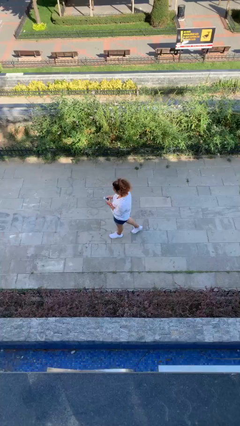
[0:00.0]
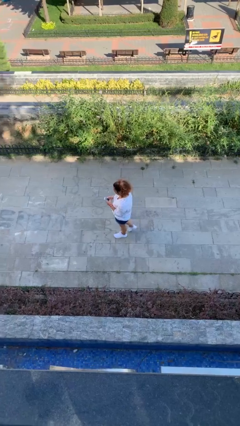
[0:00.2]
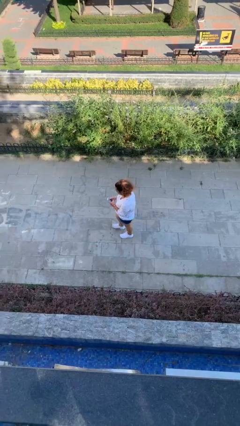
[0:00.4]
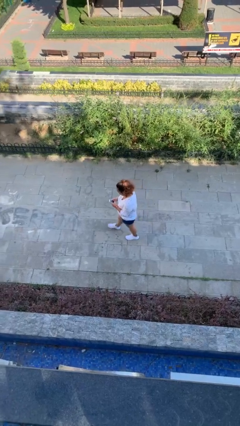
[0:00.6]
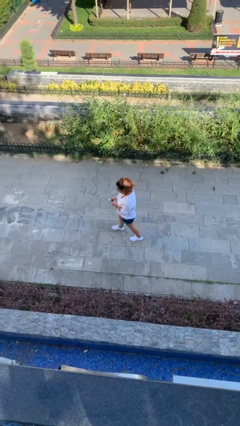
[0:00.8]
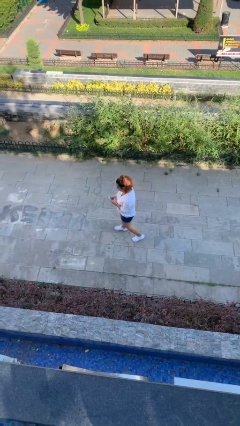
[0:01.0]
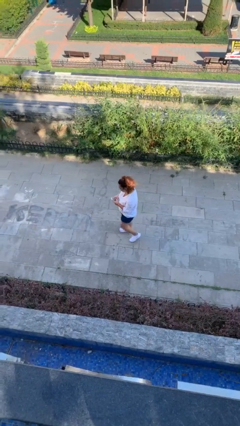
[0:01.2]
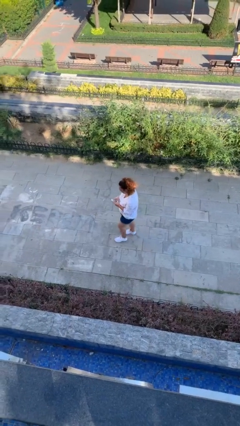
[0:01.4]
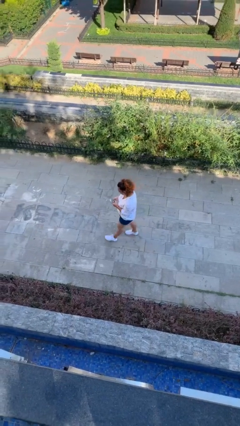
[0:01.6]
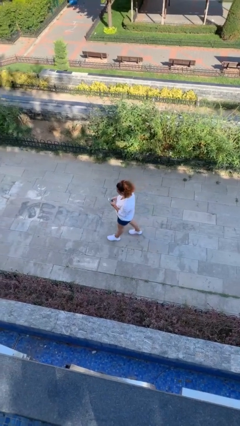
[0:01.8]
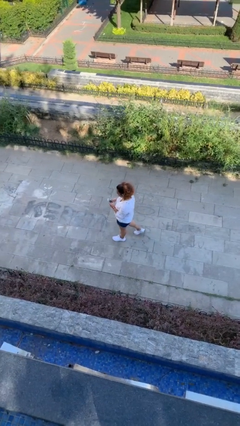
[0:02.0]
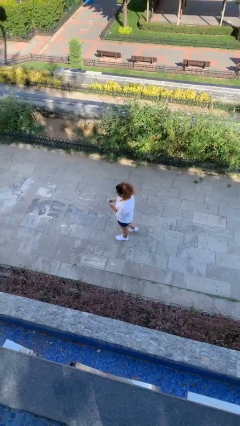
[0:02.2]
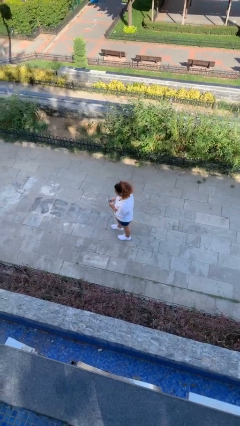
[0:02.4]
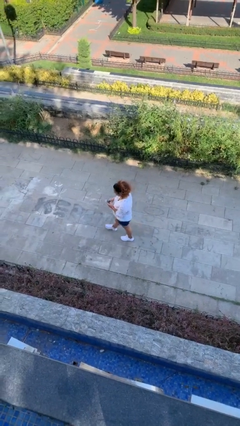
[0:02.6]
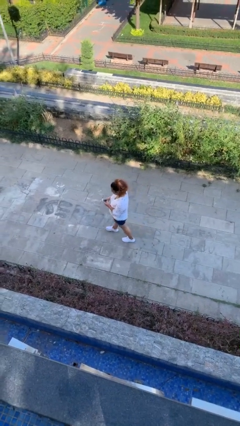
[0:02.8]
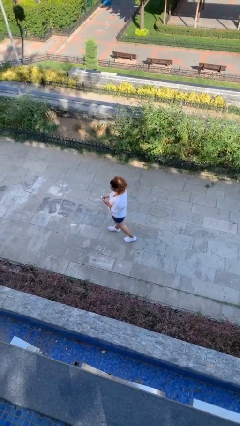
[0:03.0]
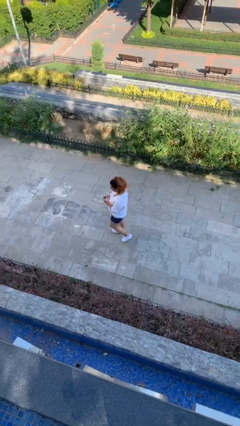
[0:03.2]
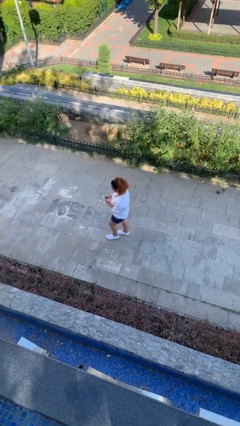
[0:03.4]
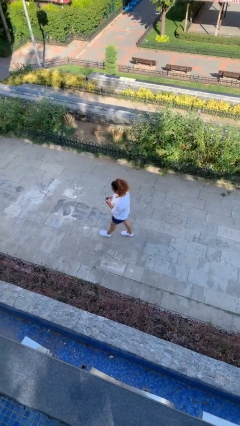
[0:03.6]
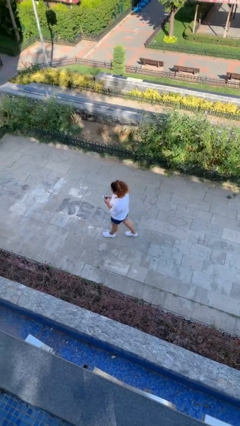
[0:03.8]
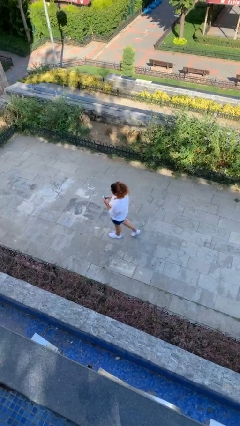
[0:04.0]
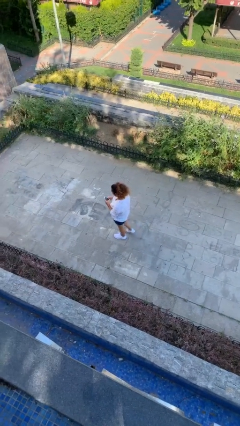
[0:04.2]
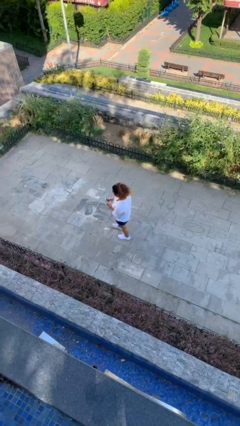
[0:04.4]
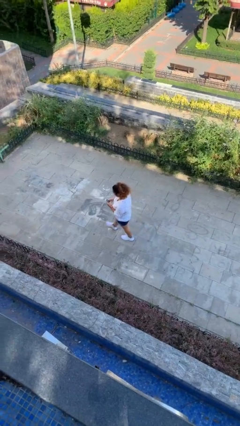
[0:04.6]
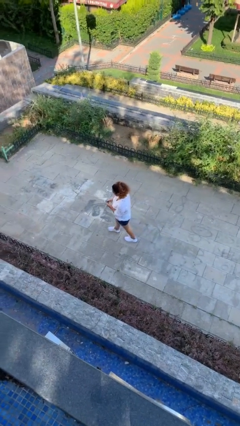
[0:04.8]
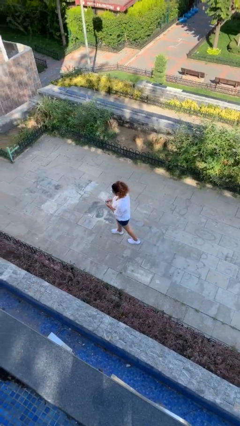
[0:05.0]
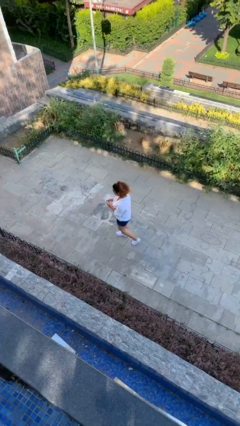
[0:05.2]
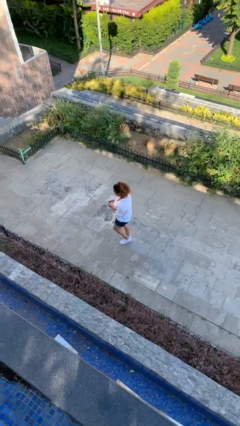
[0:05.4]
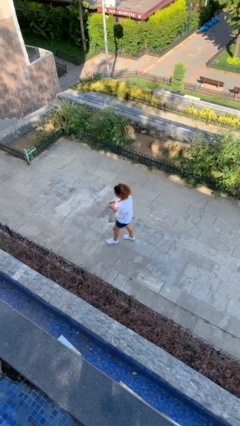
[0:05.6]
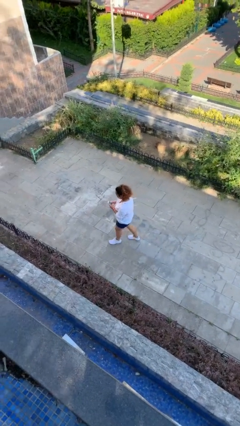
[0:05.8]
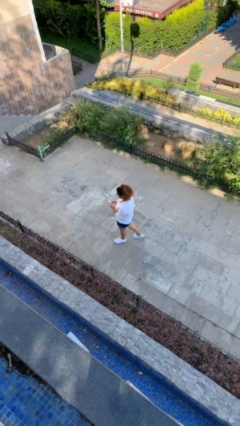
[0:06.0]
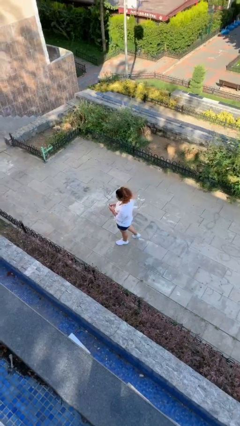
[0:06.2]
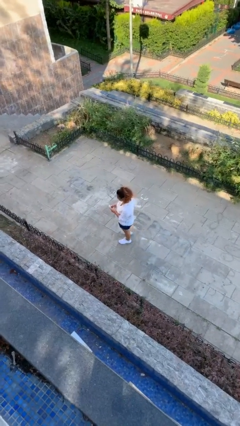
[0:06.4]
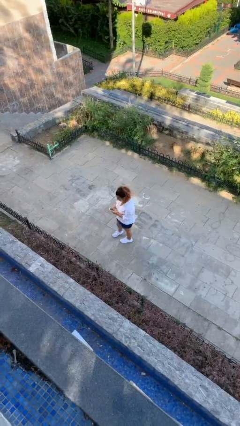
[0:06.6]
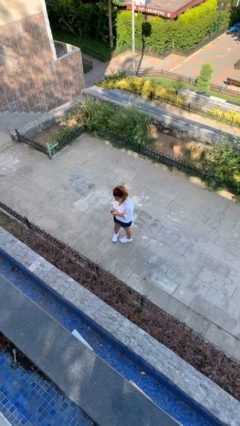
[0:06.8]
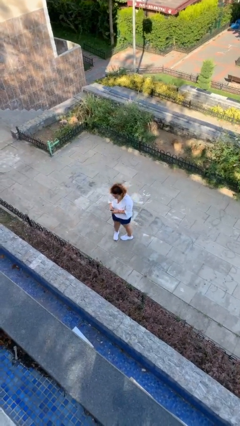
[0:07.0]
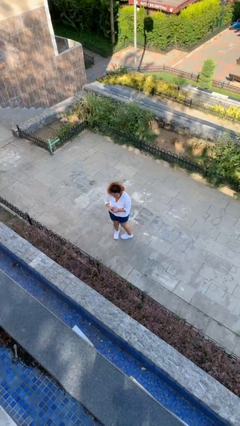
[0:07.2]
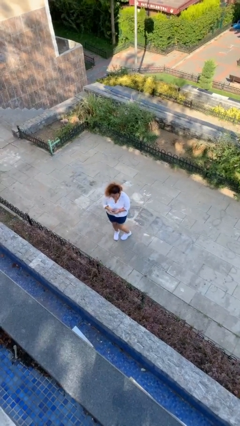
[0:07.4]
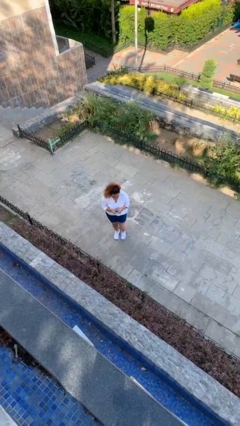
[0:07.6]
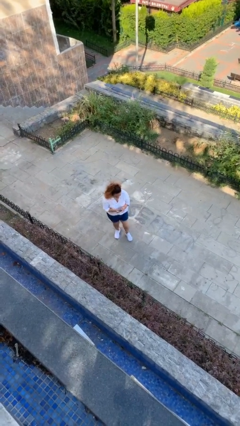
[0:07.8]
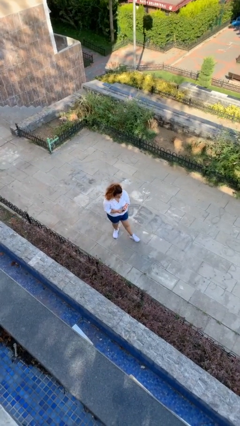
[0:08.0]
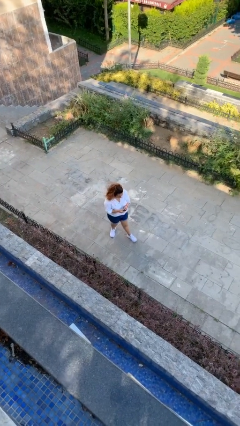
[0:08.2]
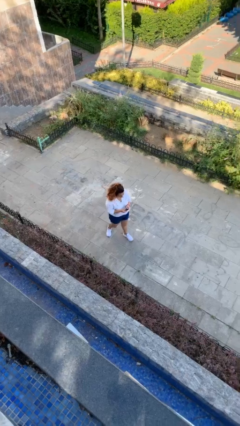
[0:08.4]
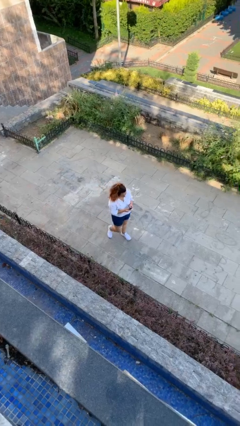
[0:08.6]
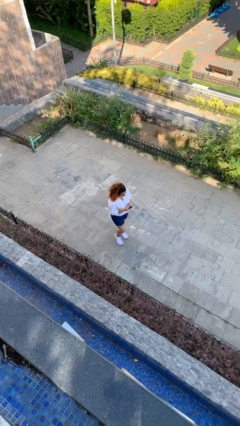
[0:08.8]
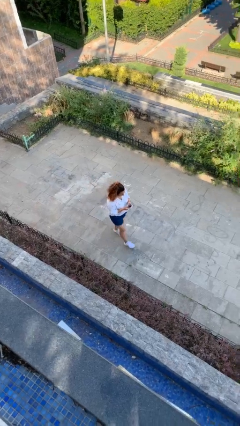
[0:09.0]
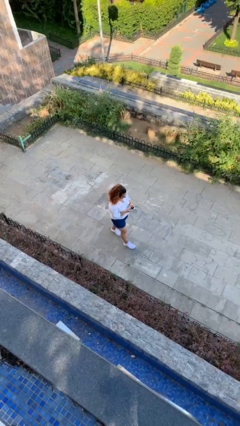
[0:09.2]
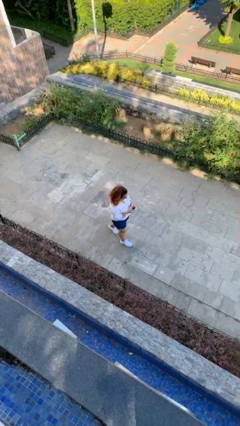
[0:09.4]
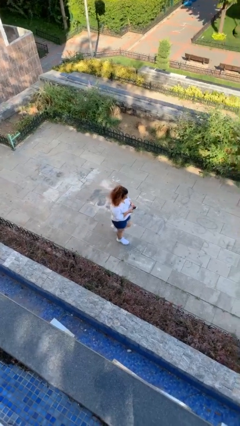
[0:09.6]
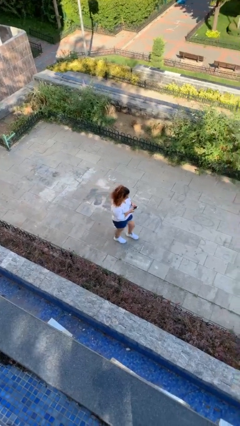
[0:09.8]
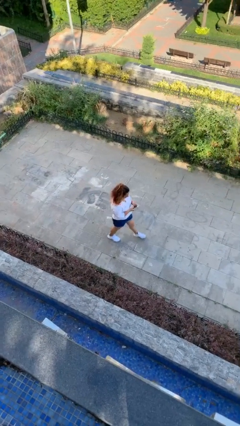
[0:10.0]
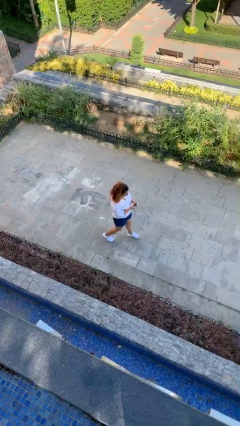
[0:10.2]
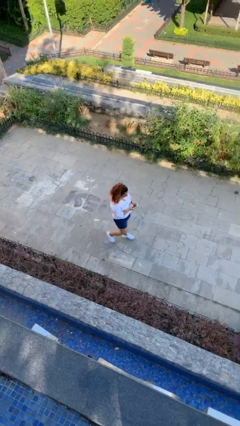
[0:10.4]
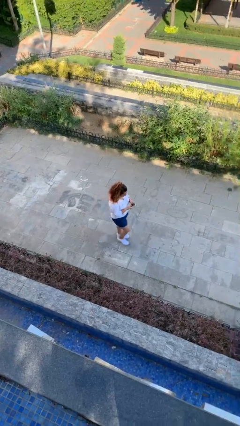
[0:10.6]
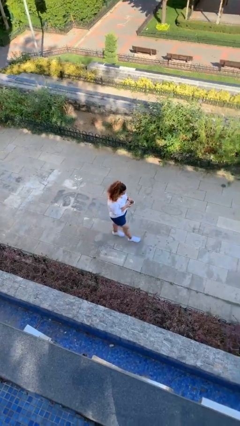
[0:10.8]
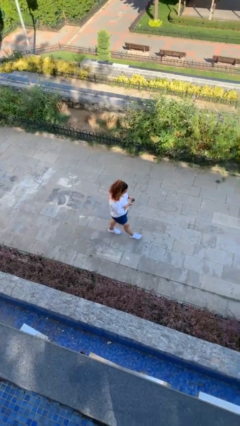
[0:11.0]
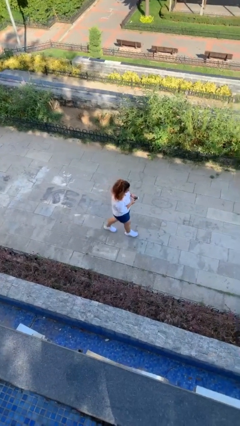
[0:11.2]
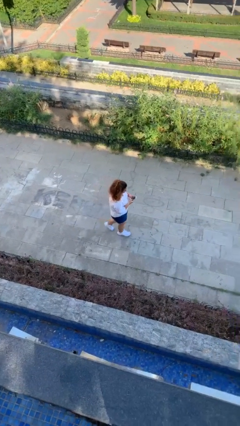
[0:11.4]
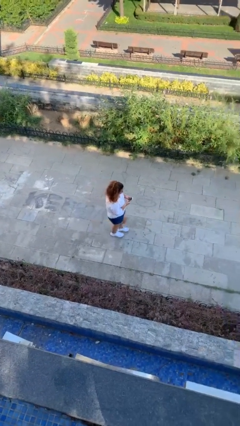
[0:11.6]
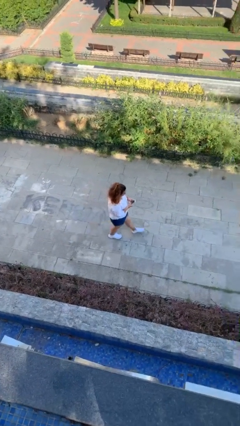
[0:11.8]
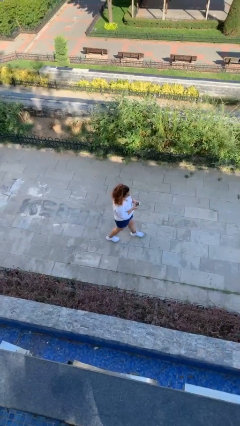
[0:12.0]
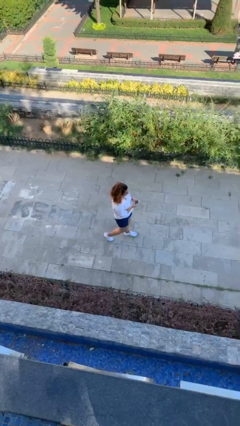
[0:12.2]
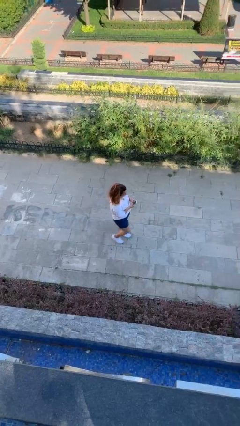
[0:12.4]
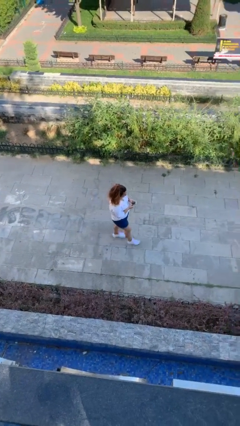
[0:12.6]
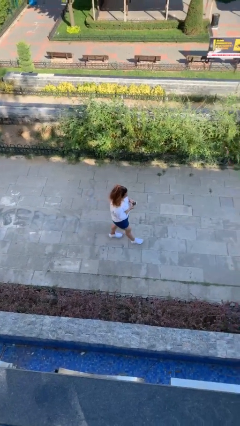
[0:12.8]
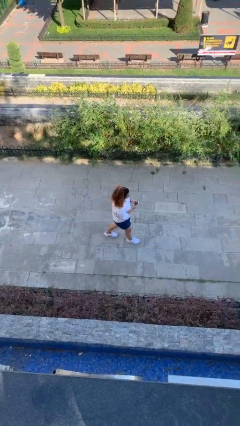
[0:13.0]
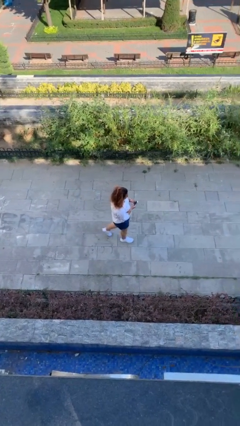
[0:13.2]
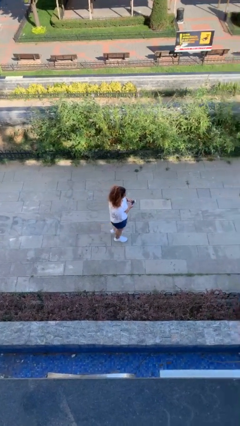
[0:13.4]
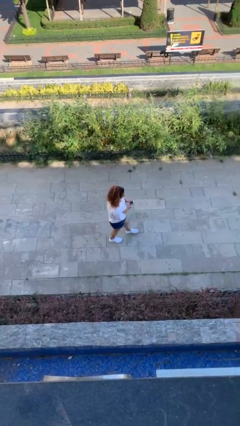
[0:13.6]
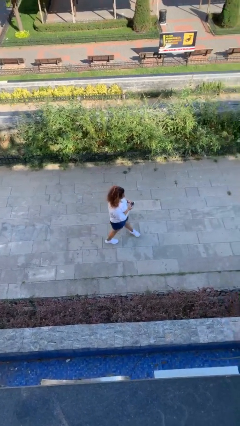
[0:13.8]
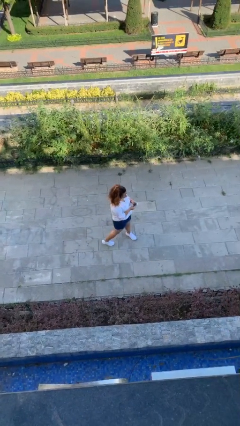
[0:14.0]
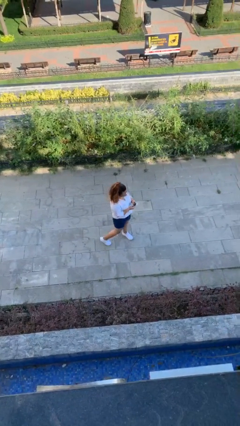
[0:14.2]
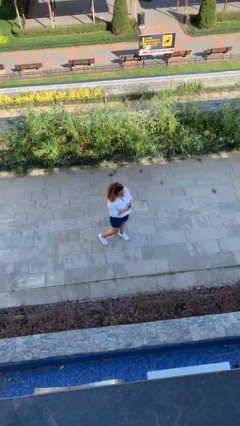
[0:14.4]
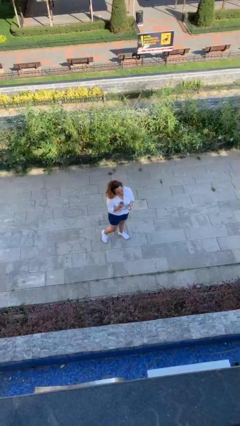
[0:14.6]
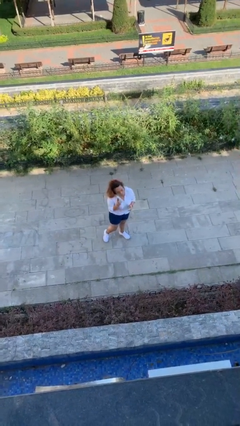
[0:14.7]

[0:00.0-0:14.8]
person texts on phone

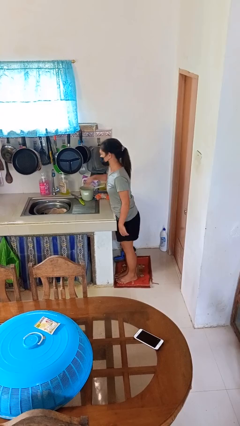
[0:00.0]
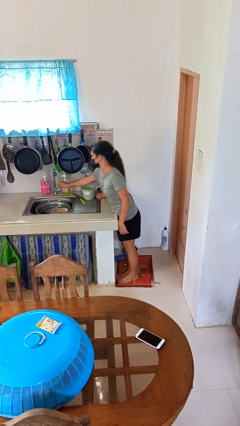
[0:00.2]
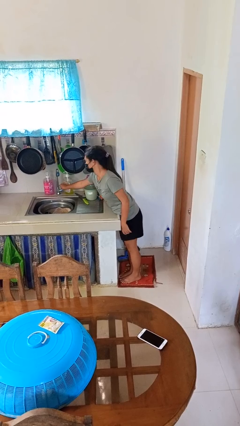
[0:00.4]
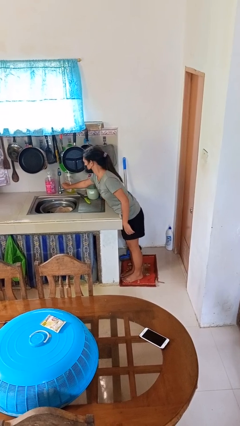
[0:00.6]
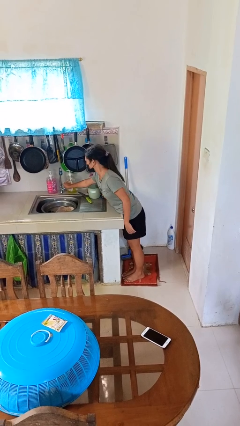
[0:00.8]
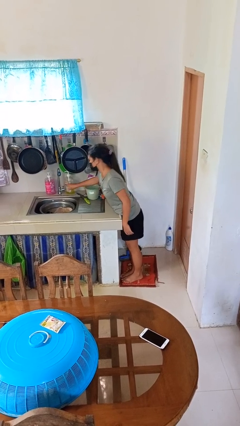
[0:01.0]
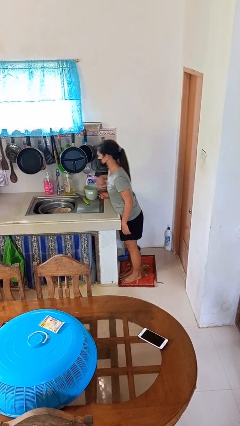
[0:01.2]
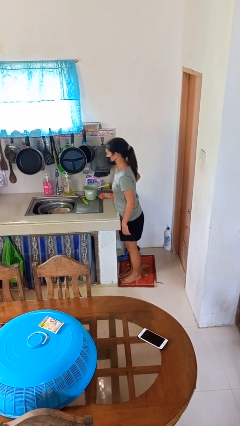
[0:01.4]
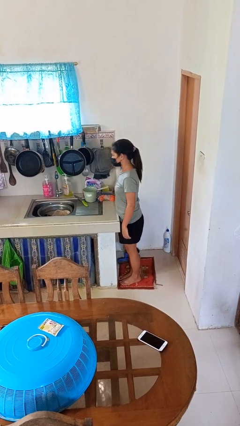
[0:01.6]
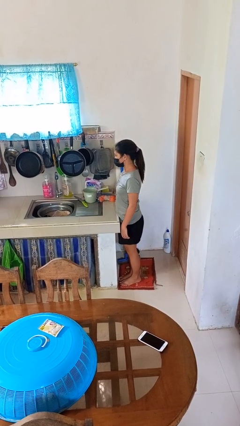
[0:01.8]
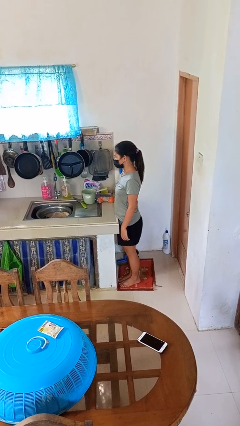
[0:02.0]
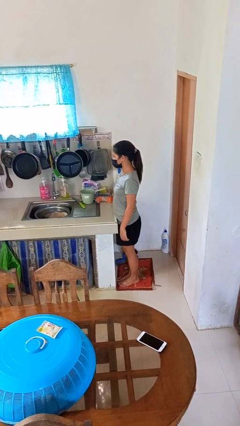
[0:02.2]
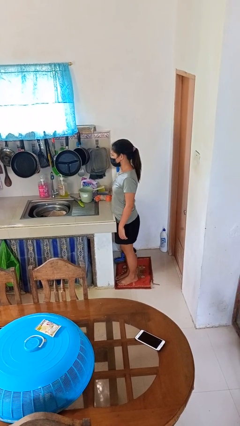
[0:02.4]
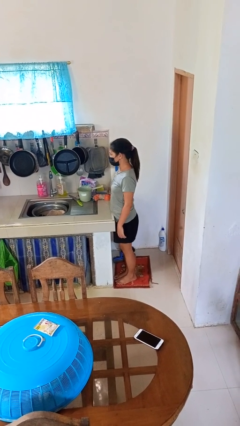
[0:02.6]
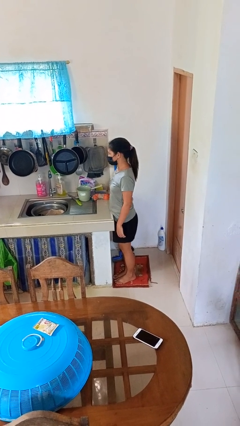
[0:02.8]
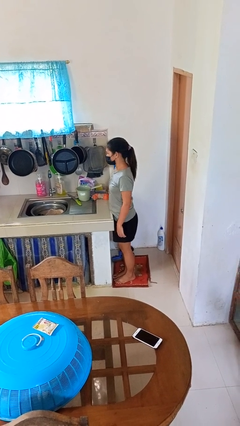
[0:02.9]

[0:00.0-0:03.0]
person turns on faucet
